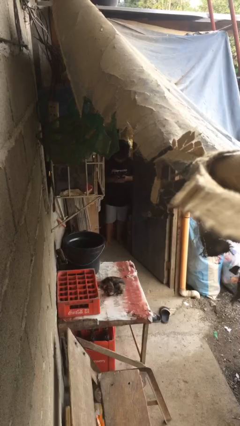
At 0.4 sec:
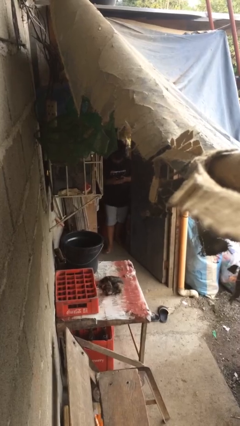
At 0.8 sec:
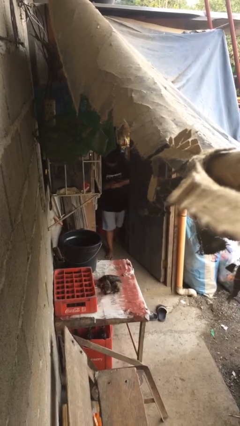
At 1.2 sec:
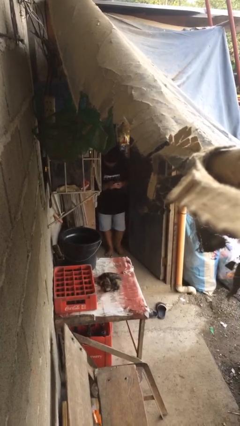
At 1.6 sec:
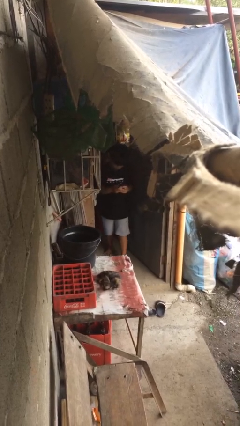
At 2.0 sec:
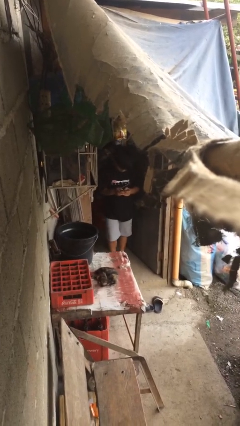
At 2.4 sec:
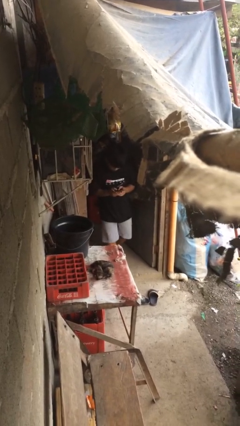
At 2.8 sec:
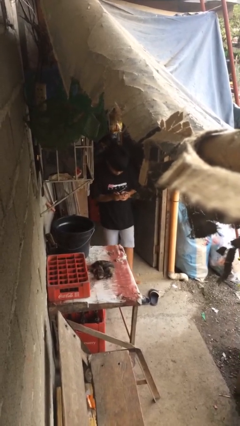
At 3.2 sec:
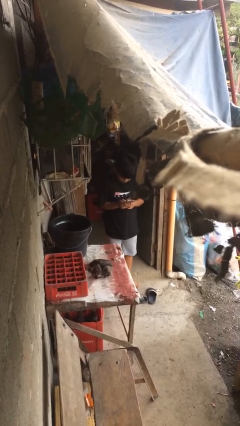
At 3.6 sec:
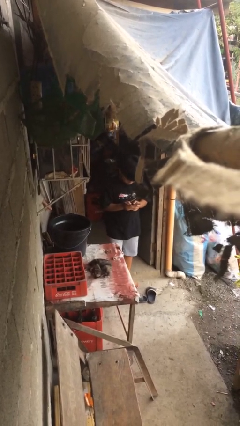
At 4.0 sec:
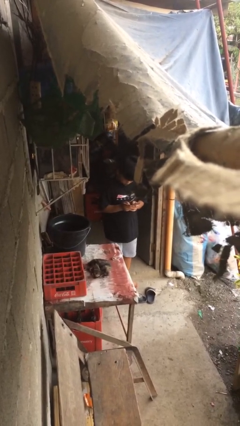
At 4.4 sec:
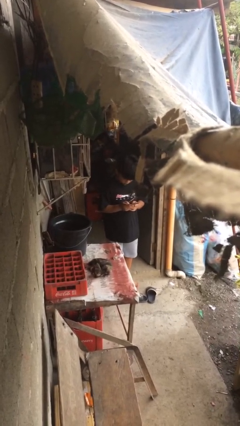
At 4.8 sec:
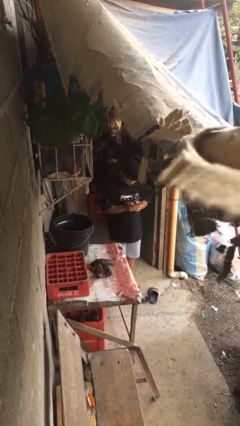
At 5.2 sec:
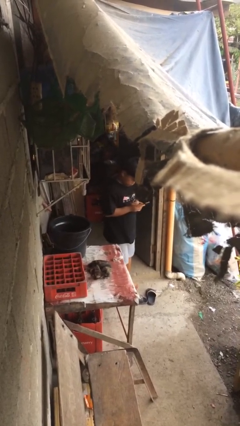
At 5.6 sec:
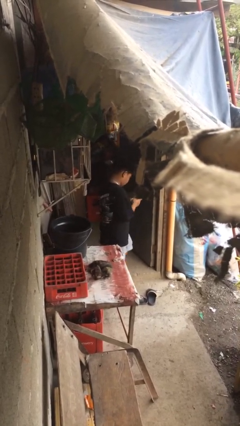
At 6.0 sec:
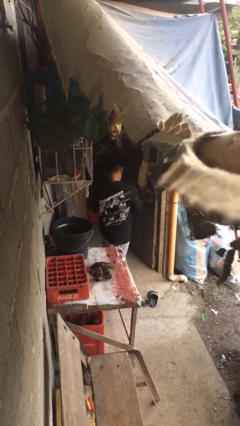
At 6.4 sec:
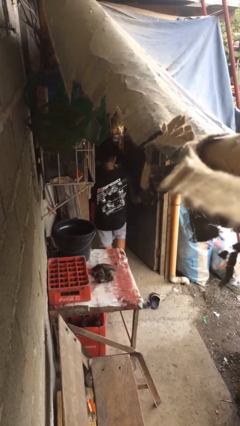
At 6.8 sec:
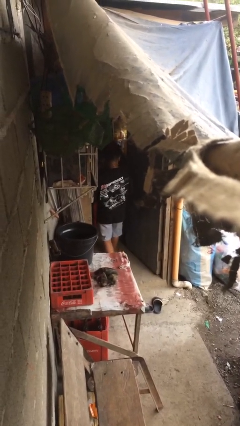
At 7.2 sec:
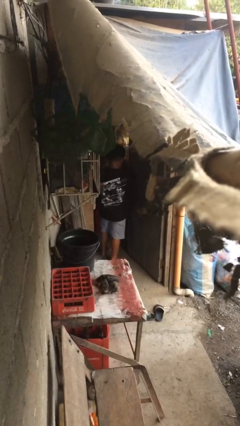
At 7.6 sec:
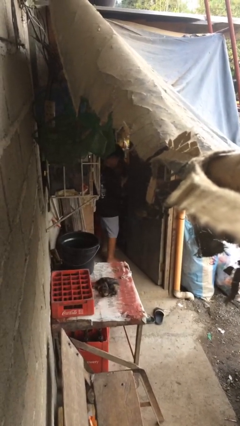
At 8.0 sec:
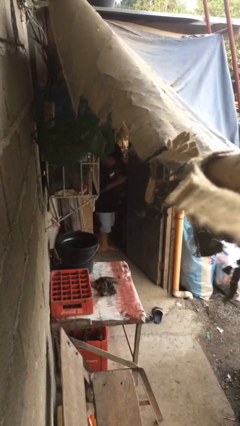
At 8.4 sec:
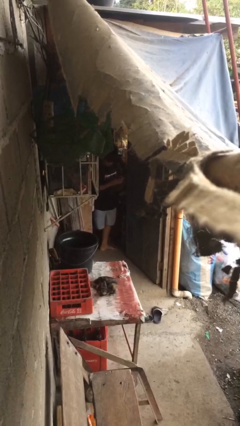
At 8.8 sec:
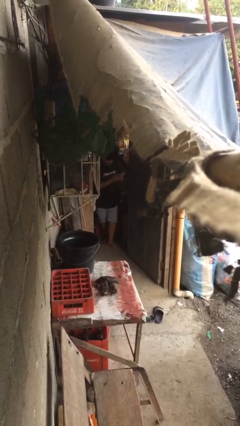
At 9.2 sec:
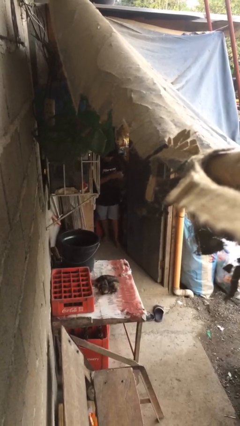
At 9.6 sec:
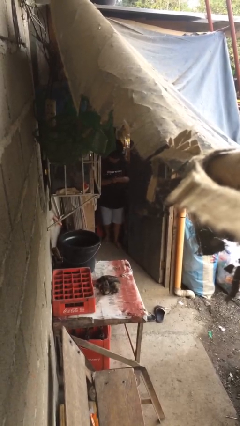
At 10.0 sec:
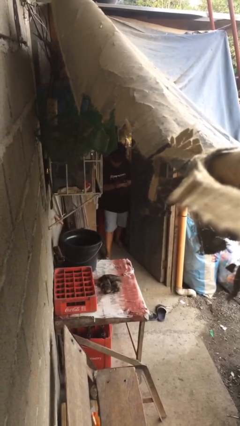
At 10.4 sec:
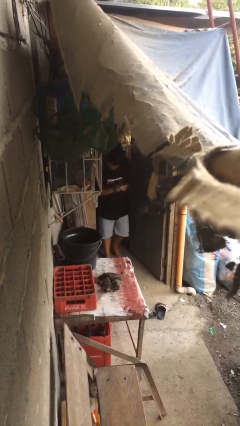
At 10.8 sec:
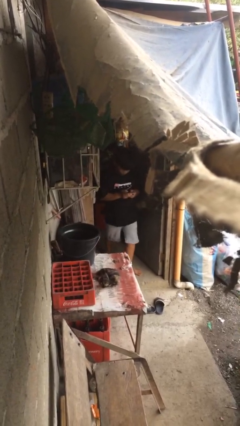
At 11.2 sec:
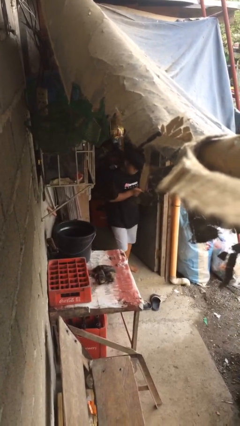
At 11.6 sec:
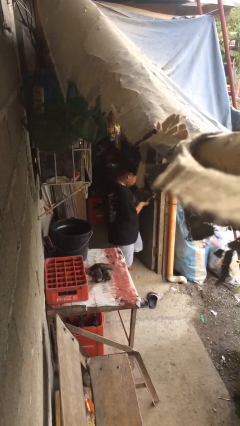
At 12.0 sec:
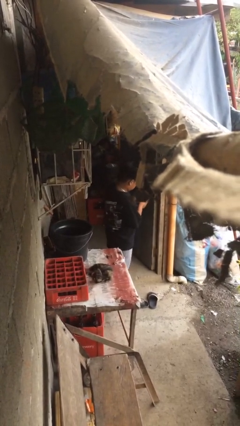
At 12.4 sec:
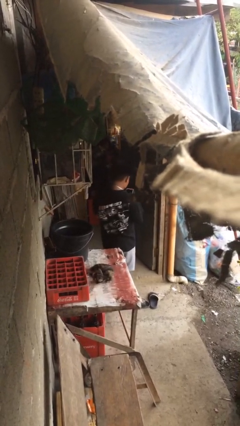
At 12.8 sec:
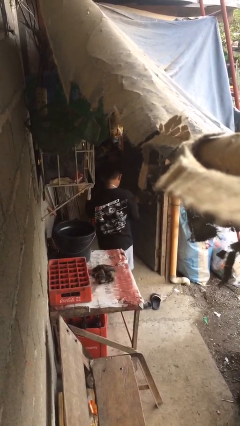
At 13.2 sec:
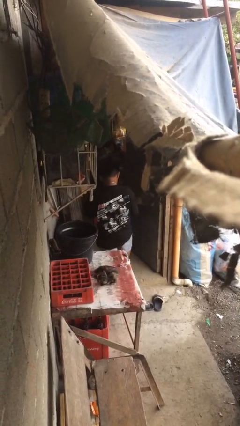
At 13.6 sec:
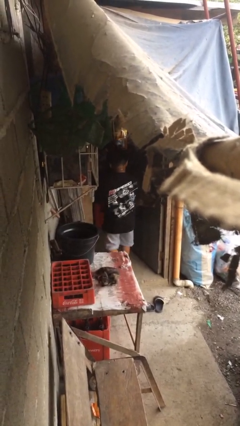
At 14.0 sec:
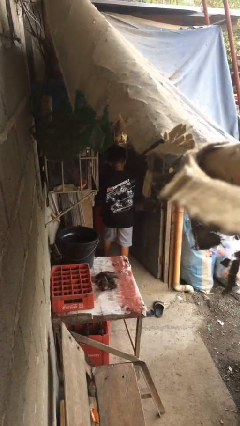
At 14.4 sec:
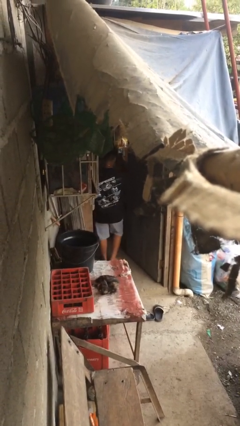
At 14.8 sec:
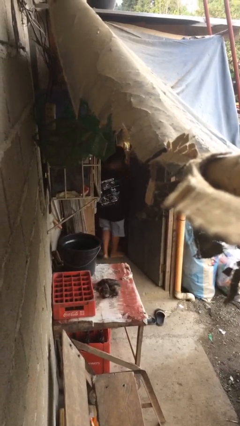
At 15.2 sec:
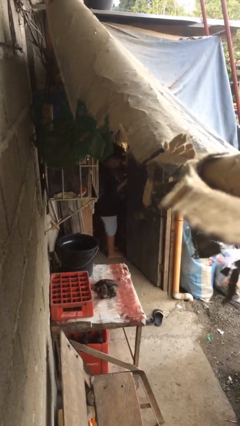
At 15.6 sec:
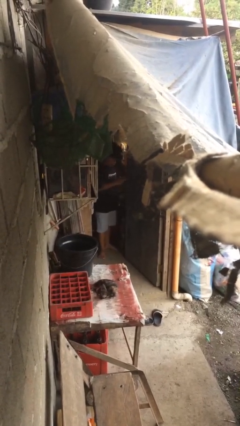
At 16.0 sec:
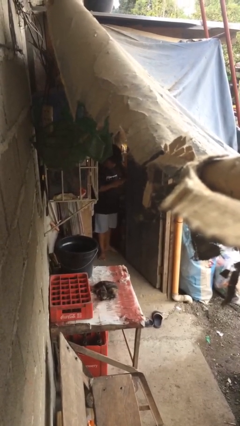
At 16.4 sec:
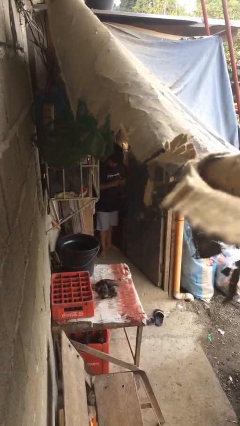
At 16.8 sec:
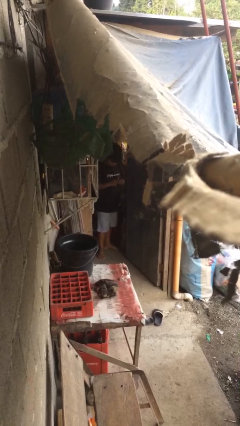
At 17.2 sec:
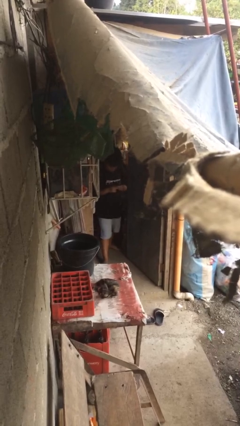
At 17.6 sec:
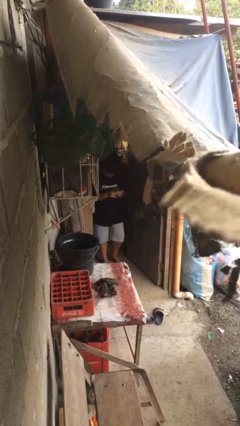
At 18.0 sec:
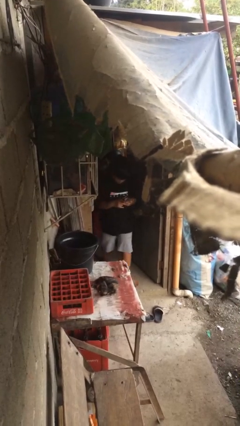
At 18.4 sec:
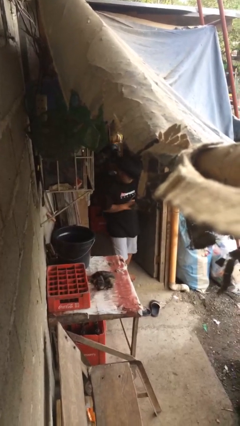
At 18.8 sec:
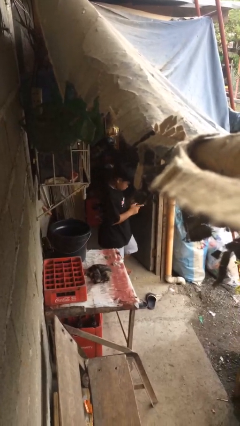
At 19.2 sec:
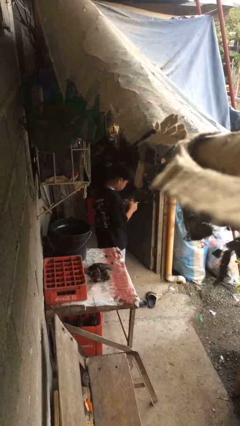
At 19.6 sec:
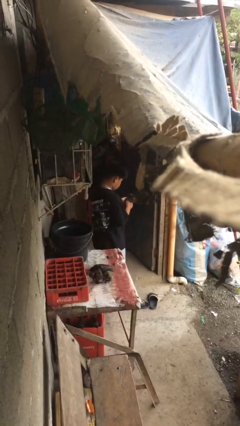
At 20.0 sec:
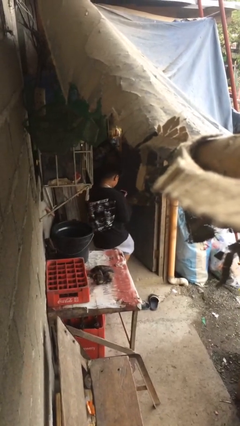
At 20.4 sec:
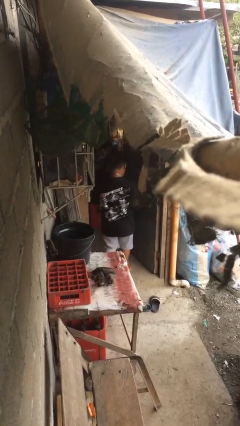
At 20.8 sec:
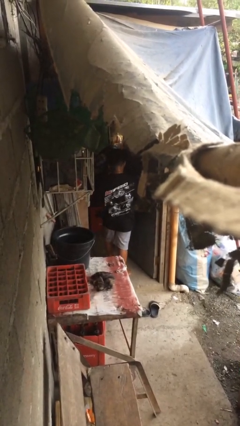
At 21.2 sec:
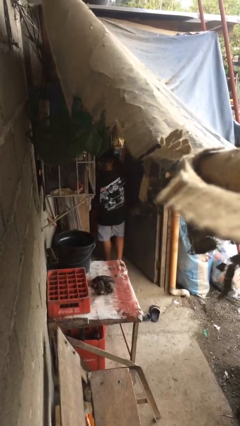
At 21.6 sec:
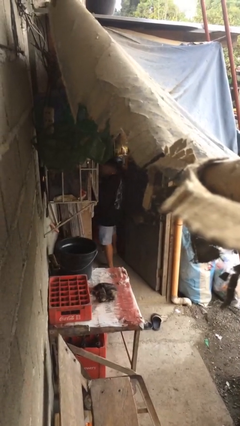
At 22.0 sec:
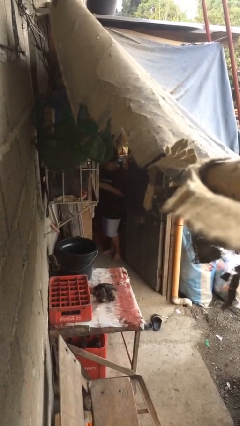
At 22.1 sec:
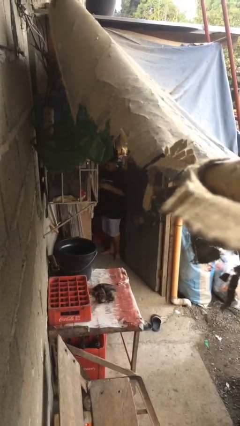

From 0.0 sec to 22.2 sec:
person texts on phone

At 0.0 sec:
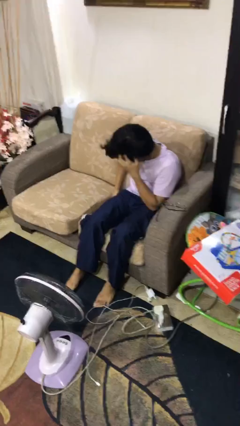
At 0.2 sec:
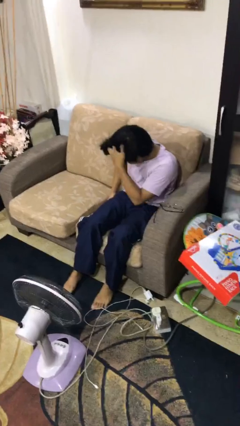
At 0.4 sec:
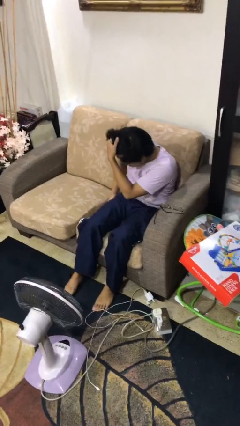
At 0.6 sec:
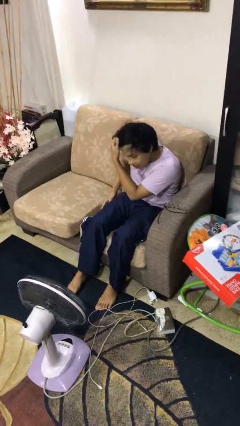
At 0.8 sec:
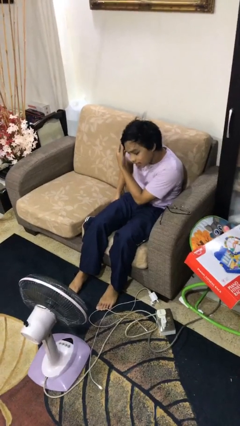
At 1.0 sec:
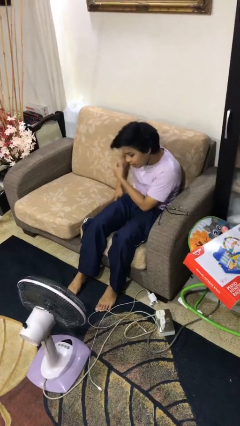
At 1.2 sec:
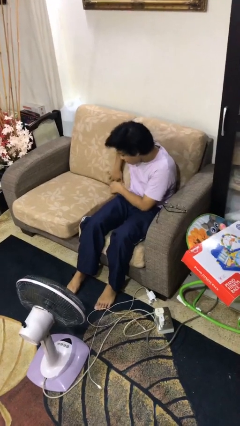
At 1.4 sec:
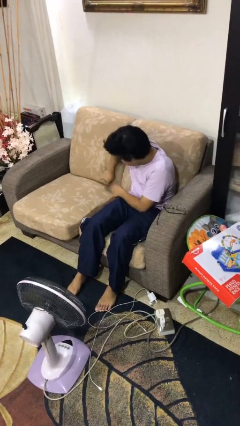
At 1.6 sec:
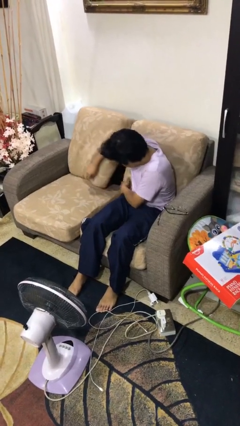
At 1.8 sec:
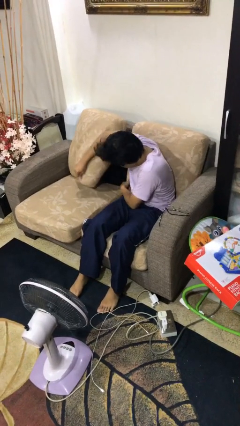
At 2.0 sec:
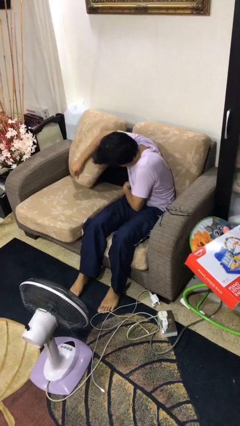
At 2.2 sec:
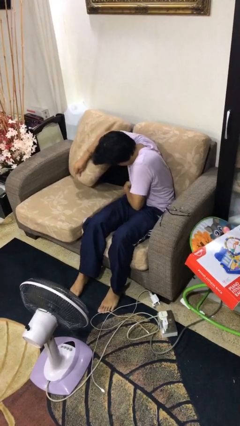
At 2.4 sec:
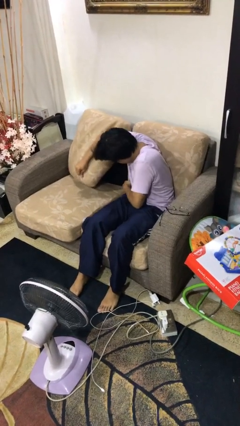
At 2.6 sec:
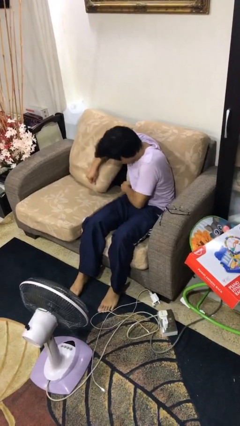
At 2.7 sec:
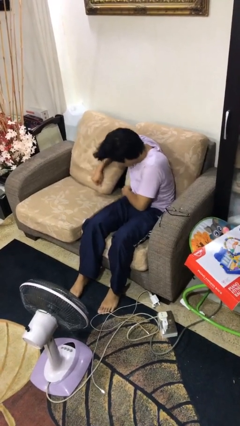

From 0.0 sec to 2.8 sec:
person searches in couch

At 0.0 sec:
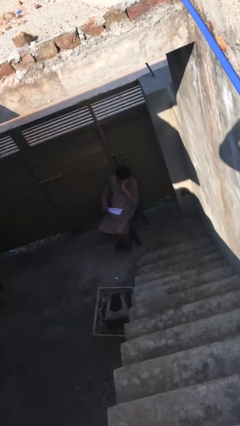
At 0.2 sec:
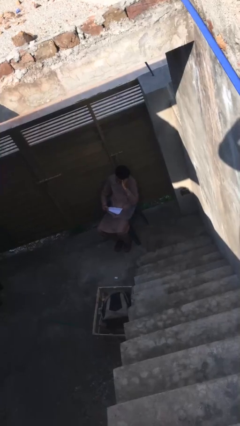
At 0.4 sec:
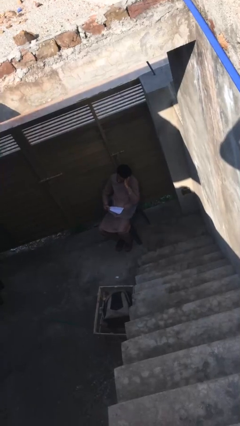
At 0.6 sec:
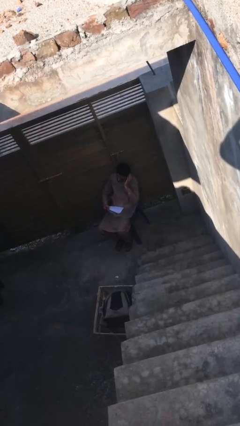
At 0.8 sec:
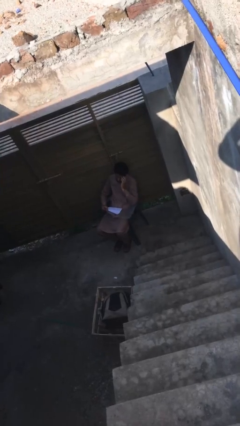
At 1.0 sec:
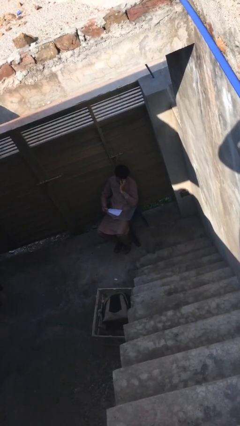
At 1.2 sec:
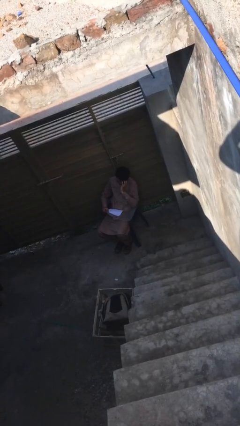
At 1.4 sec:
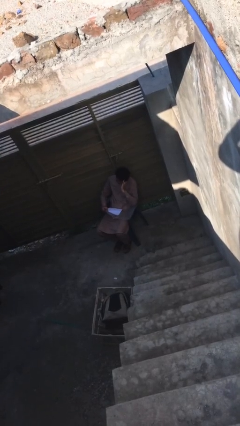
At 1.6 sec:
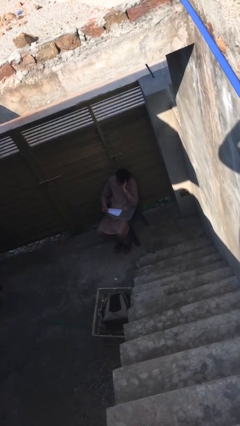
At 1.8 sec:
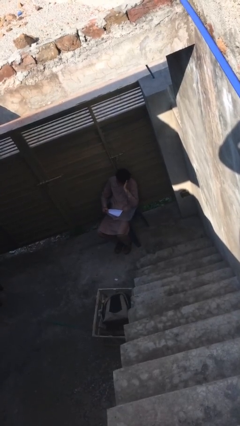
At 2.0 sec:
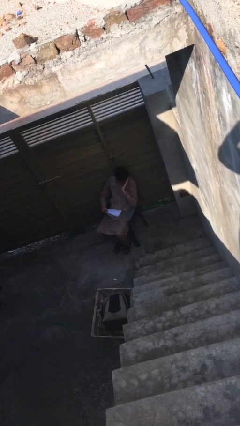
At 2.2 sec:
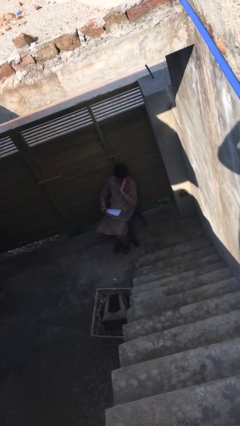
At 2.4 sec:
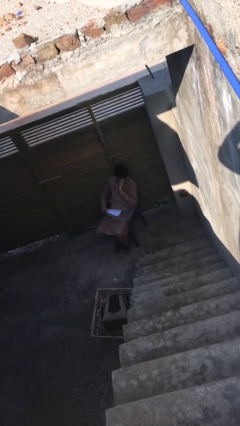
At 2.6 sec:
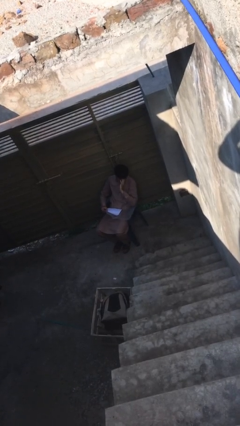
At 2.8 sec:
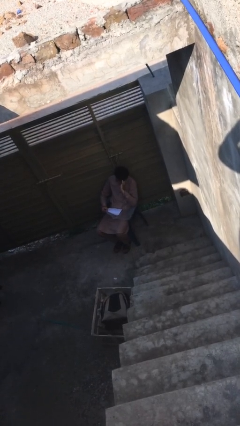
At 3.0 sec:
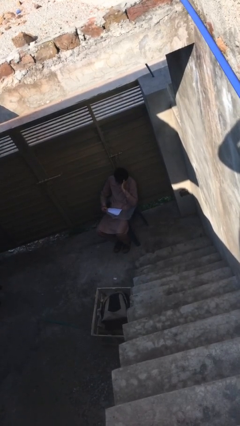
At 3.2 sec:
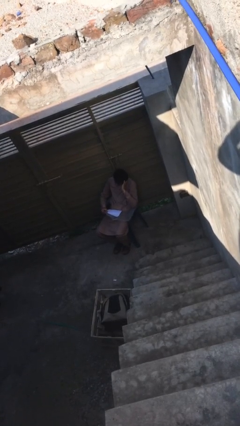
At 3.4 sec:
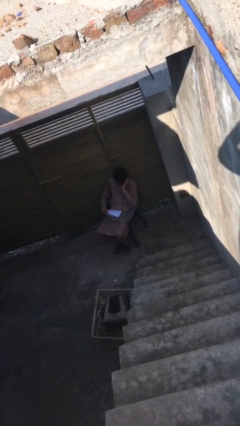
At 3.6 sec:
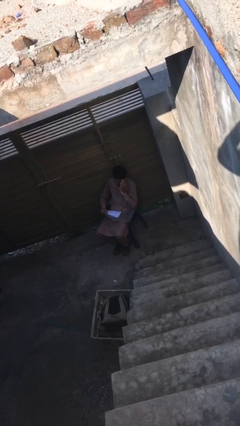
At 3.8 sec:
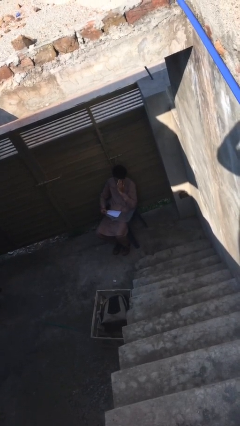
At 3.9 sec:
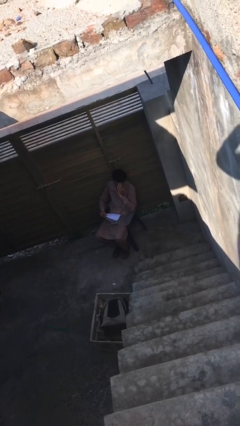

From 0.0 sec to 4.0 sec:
person reads document
